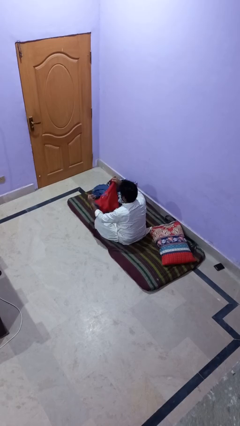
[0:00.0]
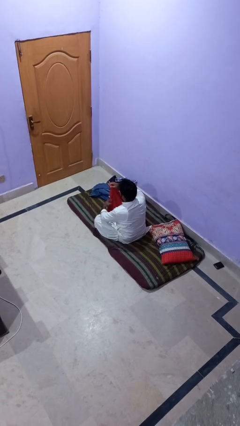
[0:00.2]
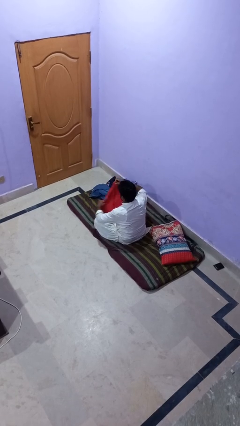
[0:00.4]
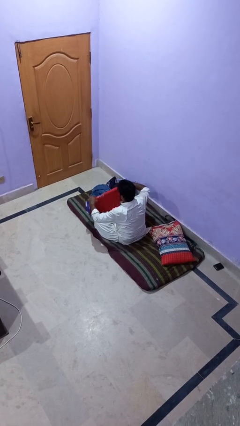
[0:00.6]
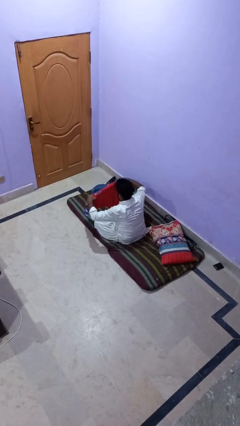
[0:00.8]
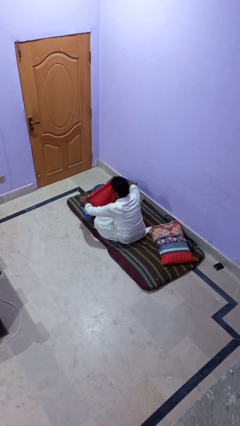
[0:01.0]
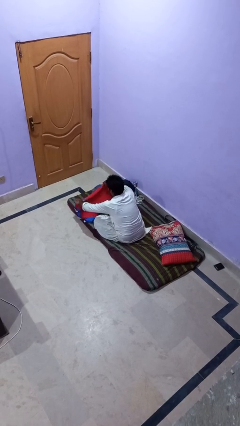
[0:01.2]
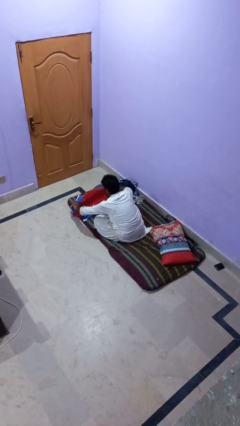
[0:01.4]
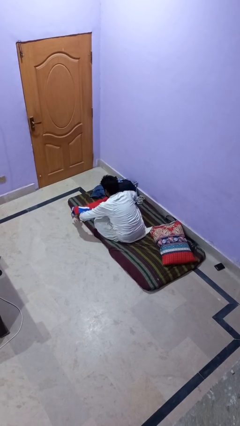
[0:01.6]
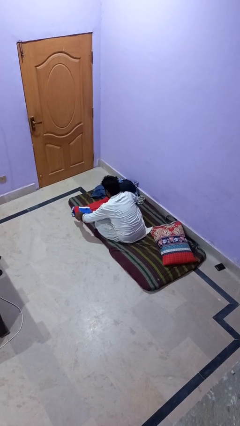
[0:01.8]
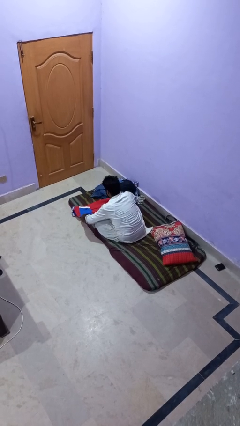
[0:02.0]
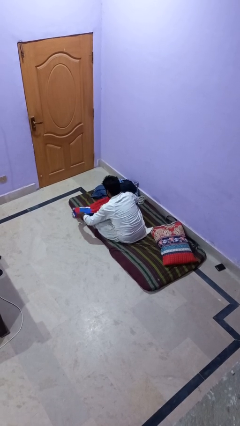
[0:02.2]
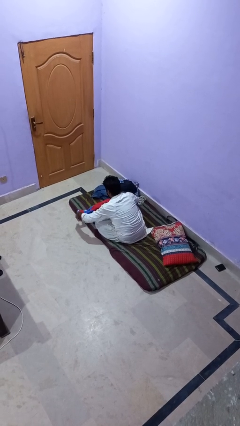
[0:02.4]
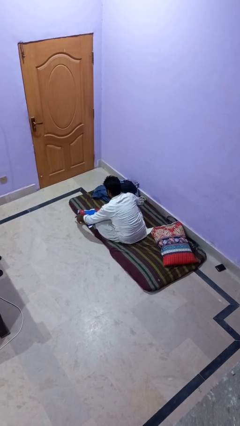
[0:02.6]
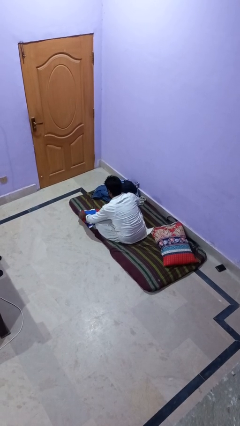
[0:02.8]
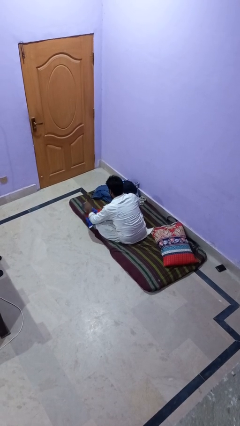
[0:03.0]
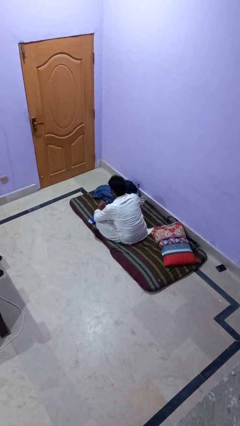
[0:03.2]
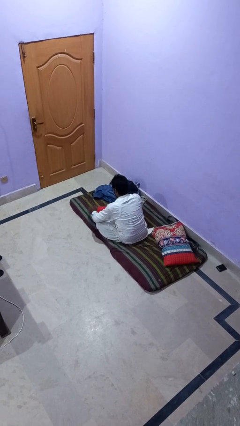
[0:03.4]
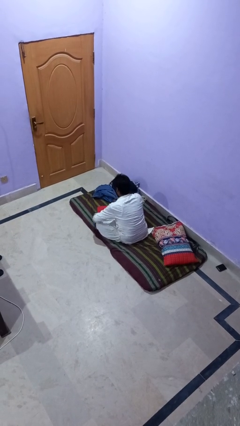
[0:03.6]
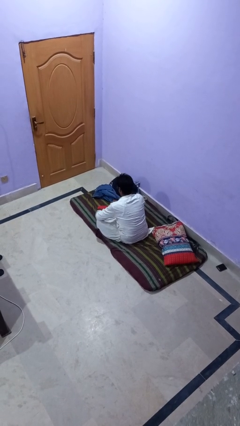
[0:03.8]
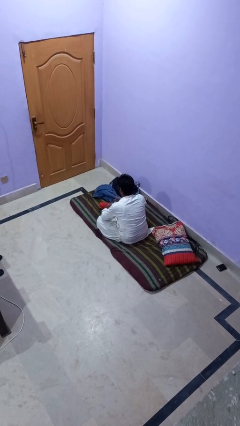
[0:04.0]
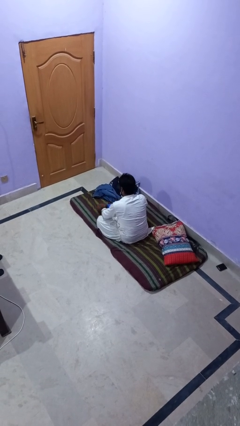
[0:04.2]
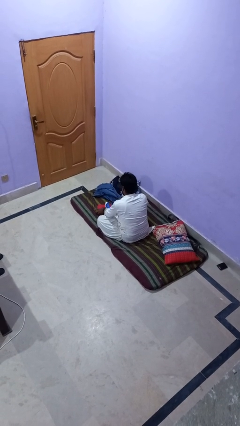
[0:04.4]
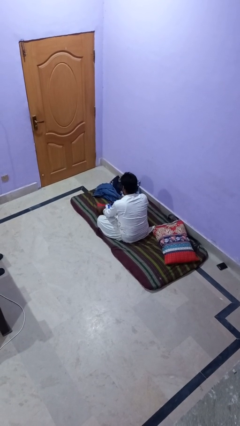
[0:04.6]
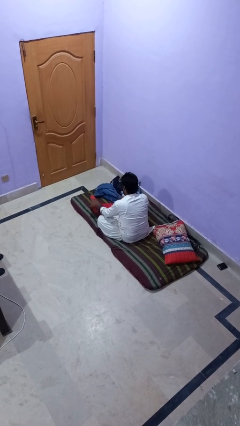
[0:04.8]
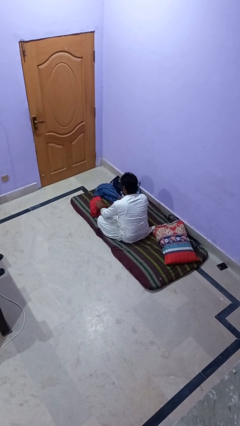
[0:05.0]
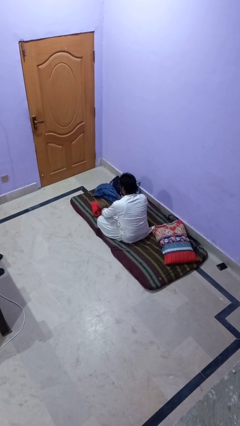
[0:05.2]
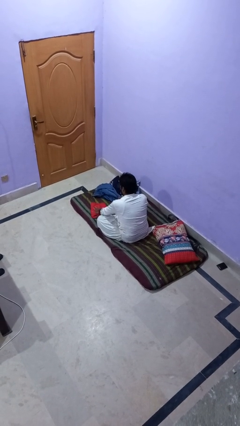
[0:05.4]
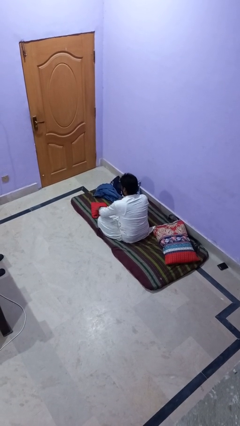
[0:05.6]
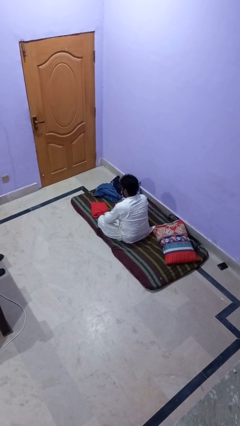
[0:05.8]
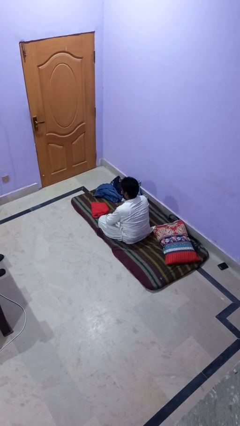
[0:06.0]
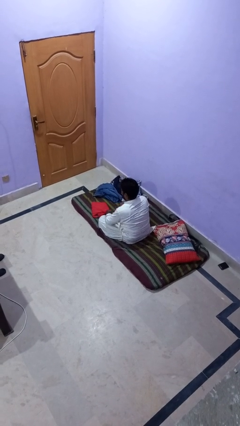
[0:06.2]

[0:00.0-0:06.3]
person folds shirt

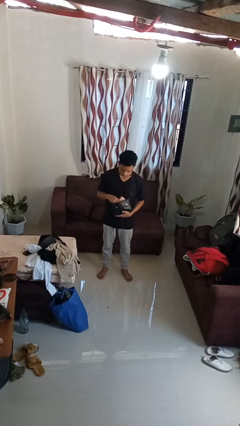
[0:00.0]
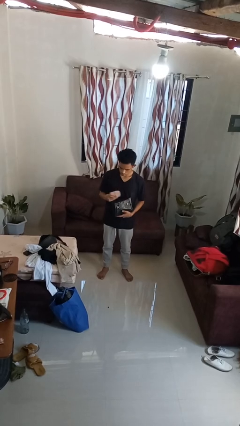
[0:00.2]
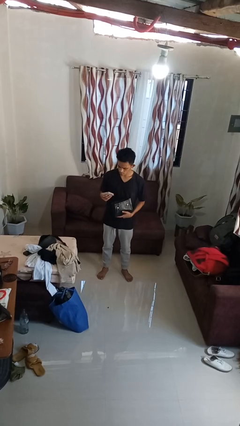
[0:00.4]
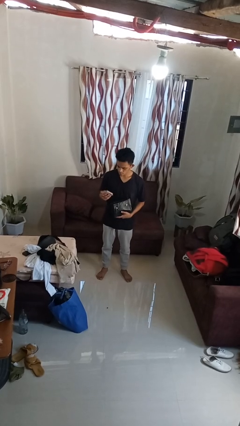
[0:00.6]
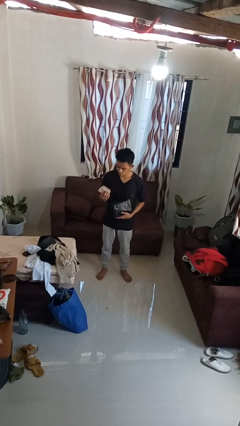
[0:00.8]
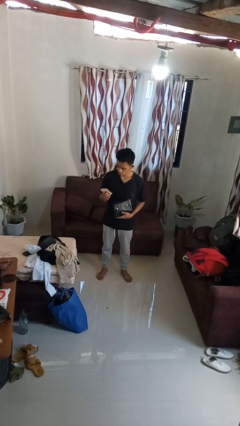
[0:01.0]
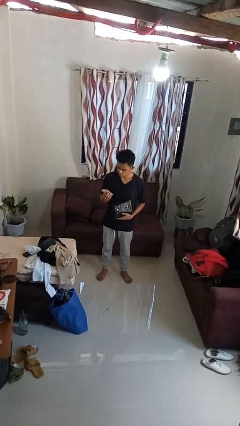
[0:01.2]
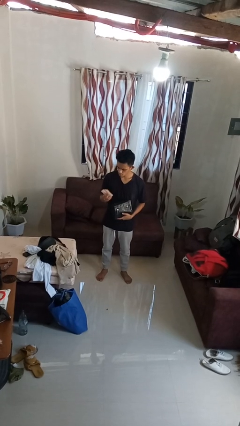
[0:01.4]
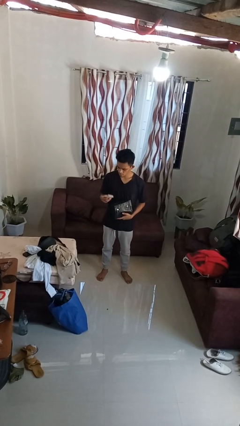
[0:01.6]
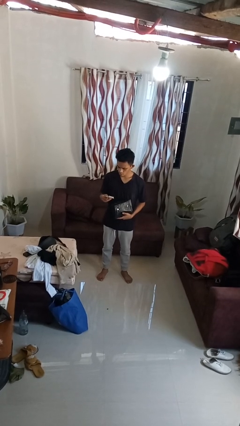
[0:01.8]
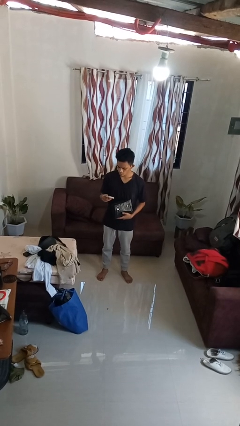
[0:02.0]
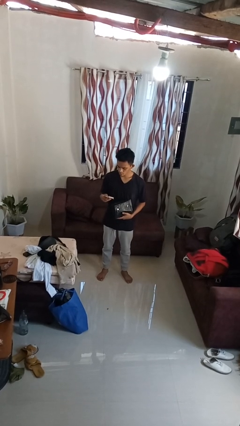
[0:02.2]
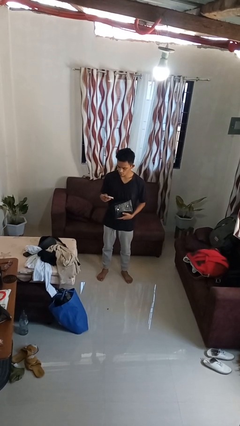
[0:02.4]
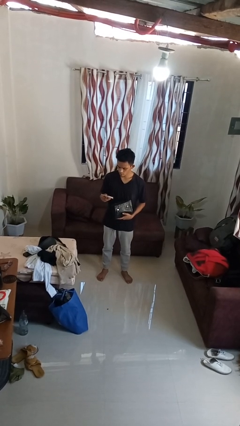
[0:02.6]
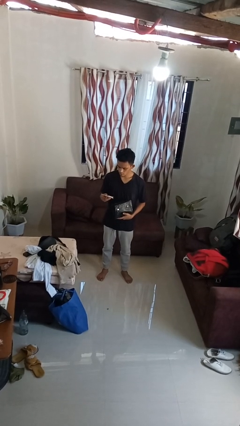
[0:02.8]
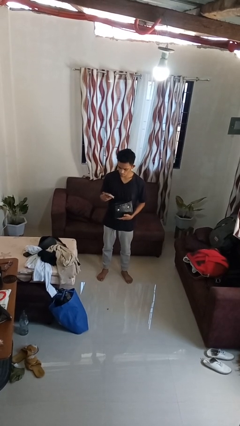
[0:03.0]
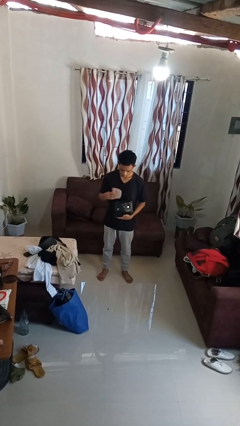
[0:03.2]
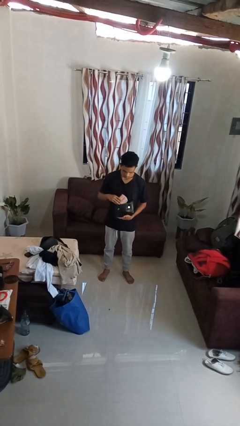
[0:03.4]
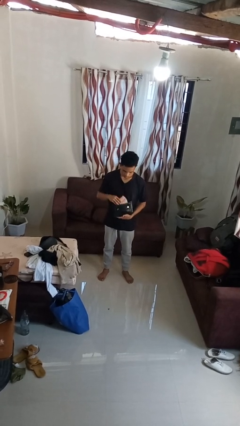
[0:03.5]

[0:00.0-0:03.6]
person takes object from purse

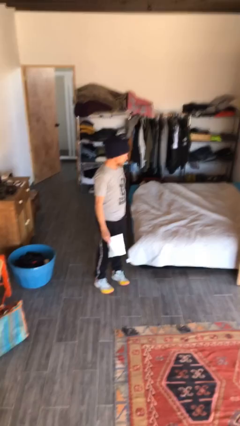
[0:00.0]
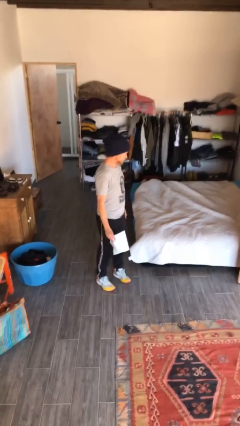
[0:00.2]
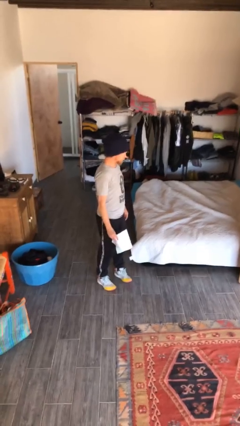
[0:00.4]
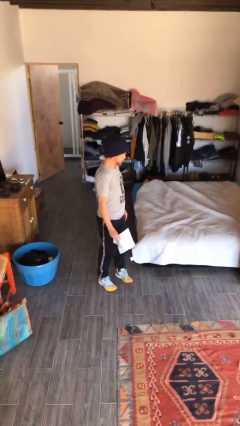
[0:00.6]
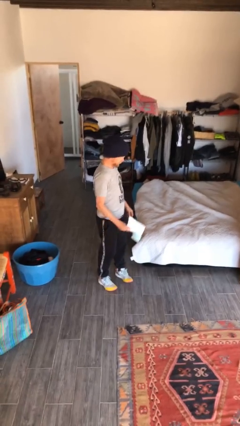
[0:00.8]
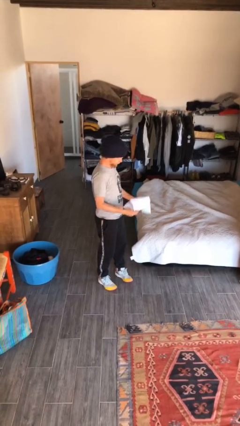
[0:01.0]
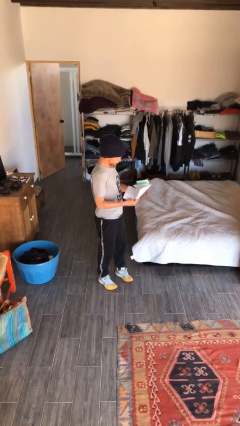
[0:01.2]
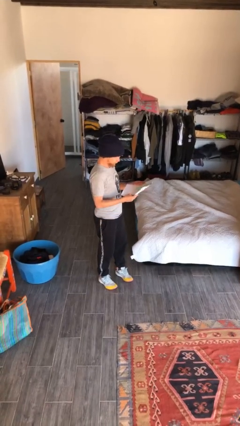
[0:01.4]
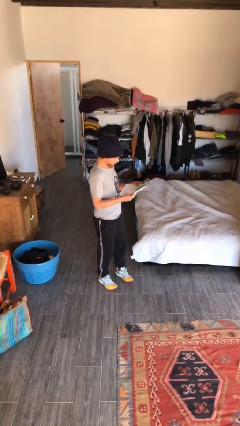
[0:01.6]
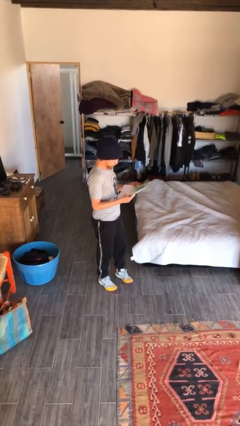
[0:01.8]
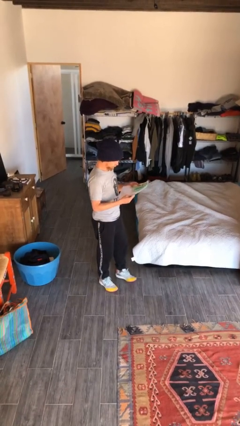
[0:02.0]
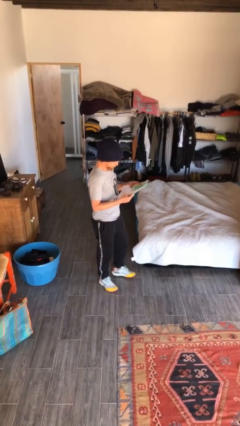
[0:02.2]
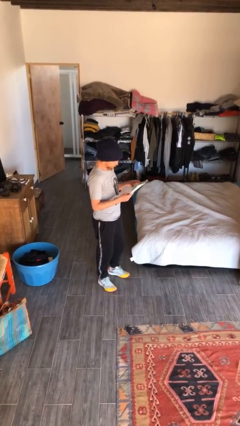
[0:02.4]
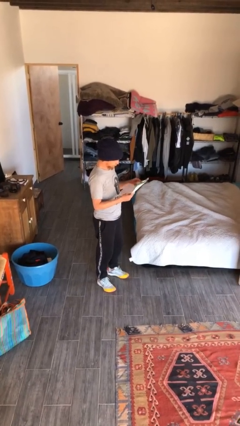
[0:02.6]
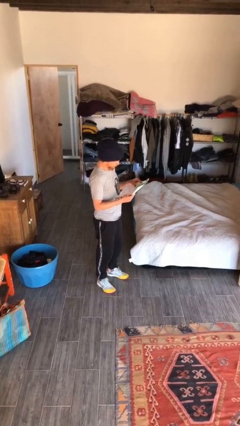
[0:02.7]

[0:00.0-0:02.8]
person reads document

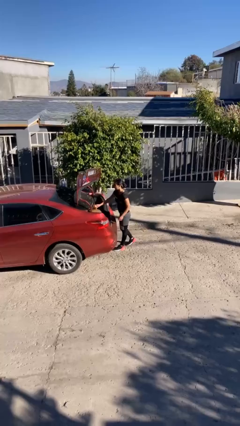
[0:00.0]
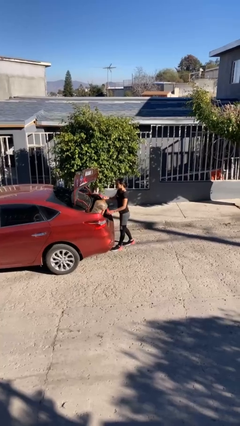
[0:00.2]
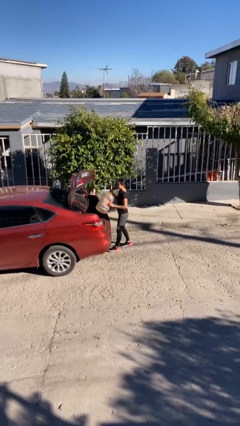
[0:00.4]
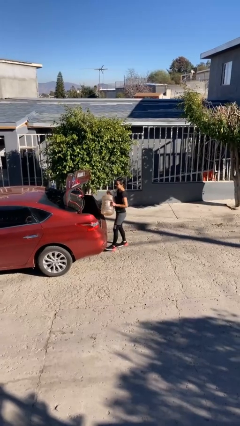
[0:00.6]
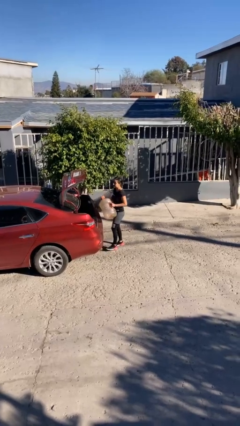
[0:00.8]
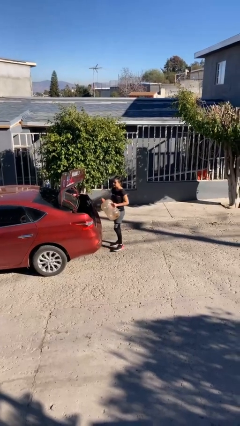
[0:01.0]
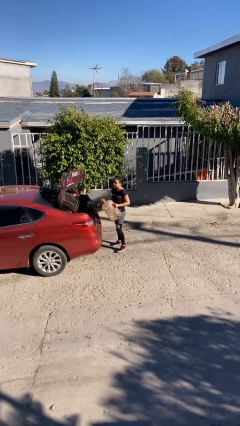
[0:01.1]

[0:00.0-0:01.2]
person unloads car

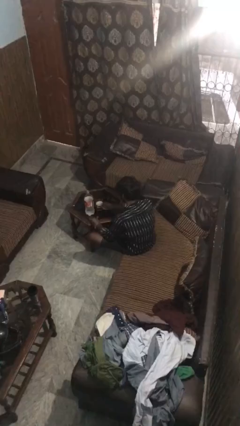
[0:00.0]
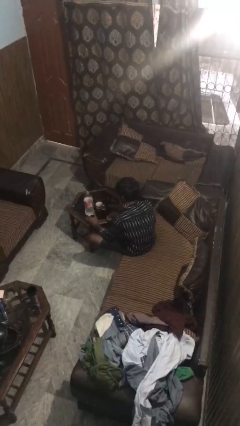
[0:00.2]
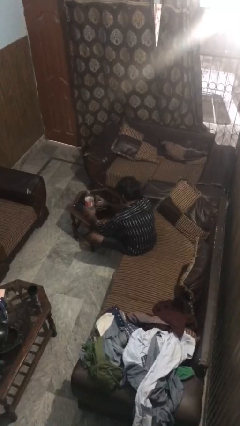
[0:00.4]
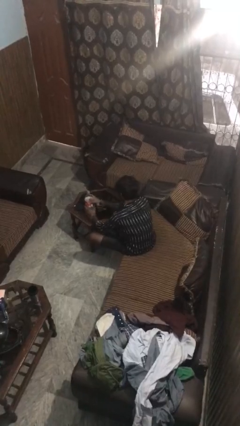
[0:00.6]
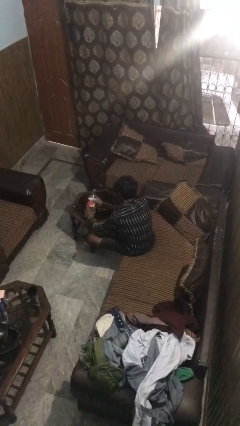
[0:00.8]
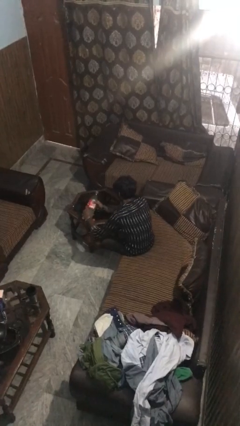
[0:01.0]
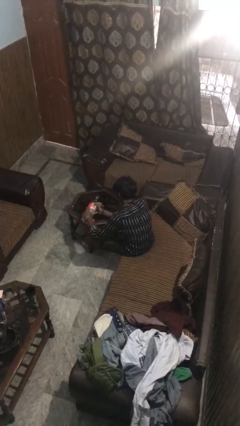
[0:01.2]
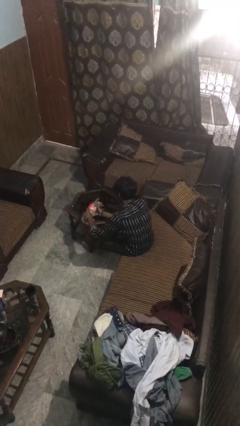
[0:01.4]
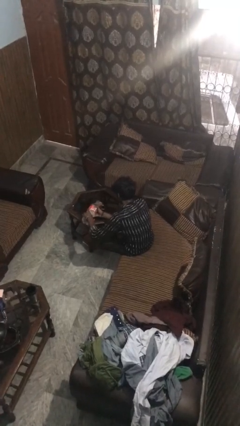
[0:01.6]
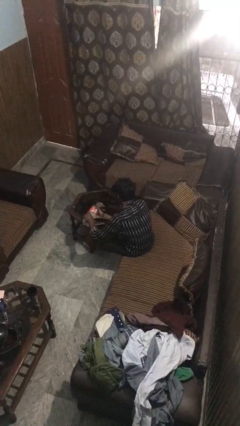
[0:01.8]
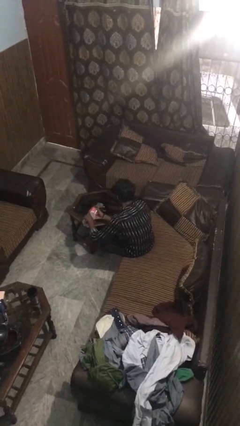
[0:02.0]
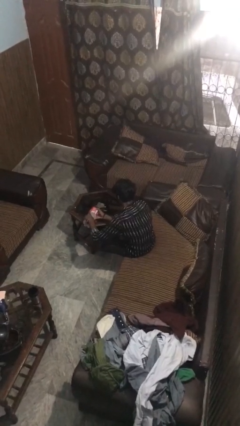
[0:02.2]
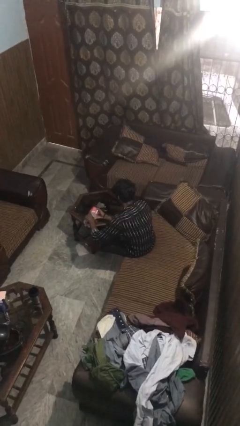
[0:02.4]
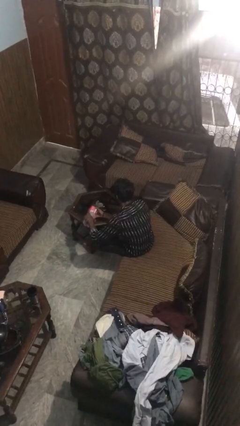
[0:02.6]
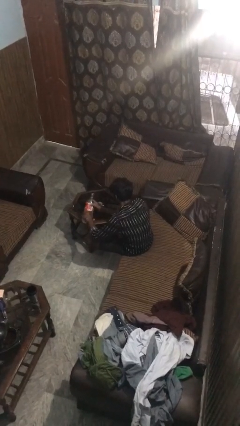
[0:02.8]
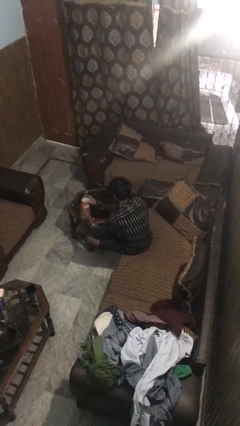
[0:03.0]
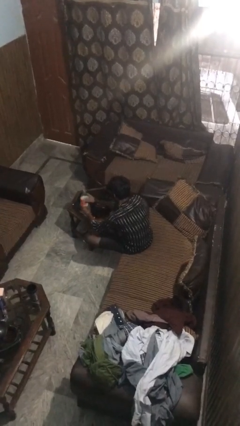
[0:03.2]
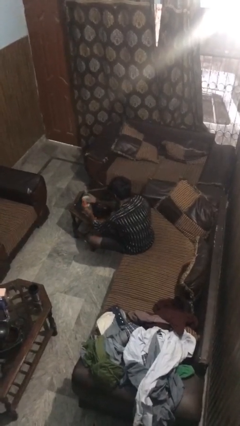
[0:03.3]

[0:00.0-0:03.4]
person pours liquid into cup
